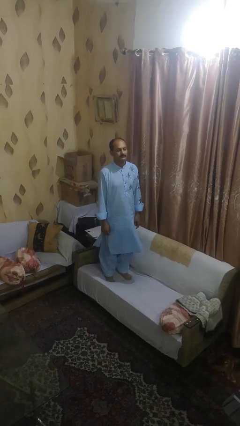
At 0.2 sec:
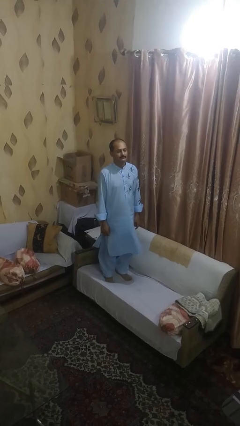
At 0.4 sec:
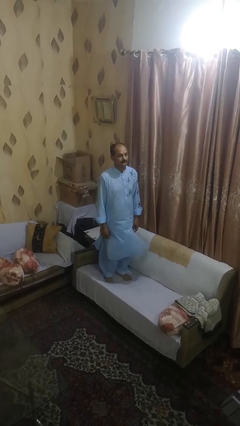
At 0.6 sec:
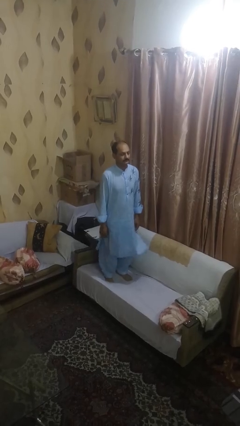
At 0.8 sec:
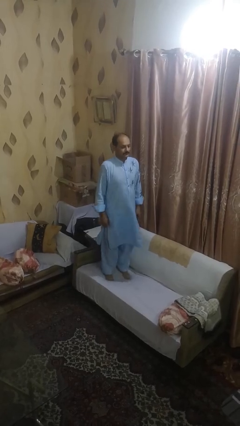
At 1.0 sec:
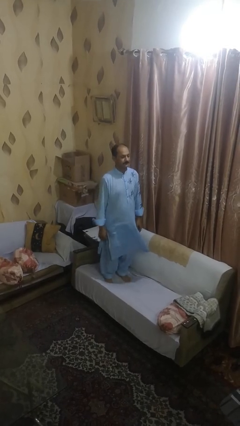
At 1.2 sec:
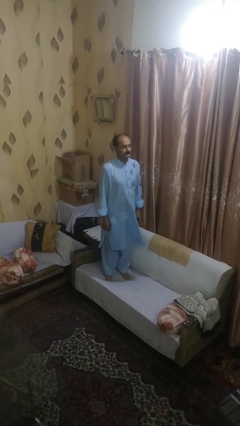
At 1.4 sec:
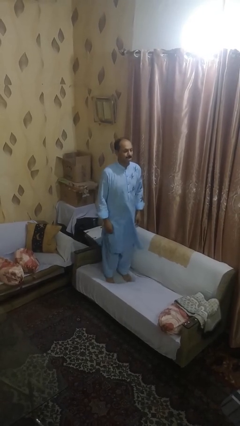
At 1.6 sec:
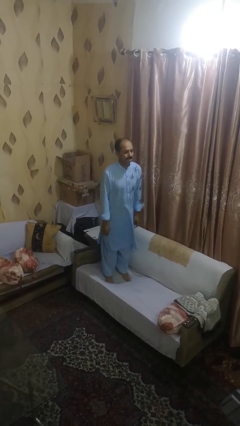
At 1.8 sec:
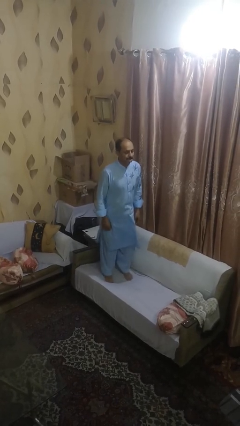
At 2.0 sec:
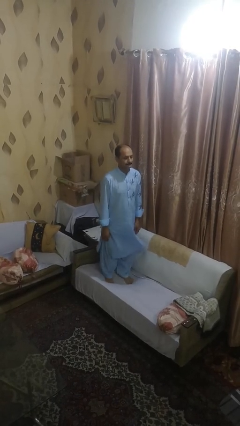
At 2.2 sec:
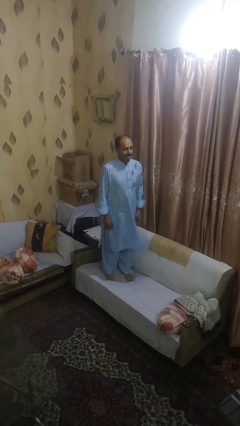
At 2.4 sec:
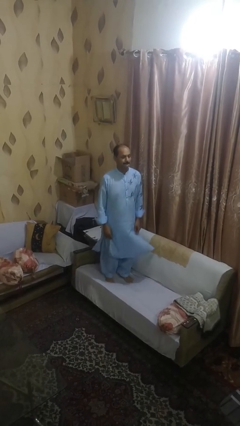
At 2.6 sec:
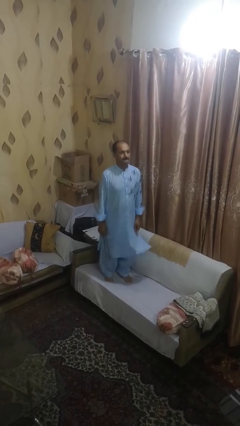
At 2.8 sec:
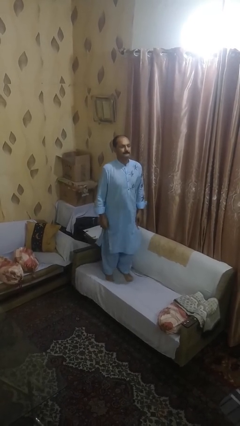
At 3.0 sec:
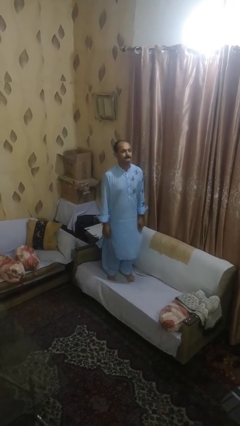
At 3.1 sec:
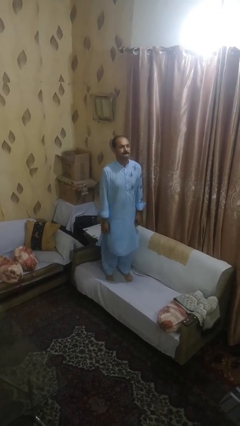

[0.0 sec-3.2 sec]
person jumps on couch

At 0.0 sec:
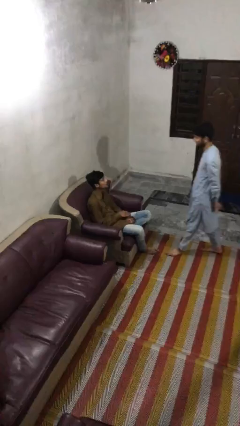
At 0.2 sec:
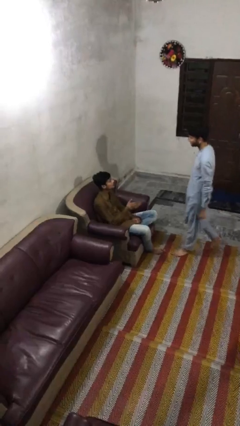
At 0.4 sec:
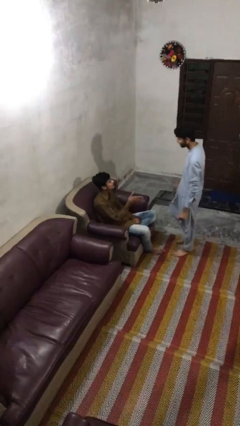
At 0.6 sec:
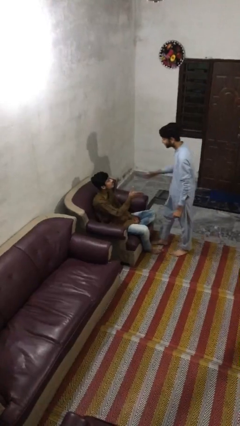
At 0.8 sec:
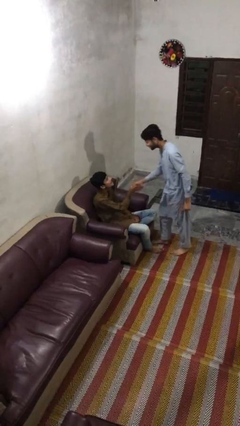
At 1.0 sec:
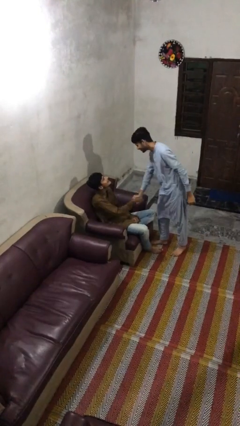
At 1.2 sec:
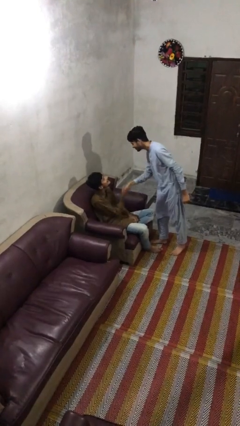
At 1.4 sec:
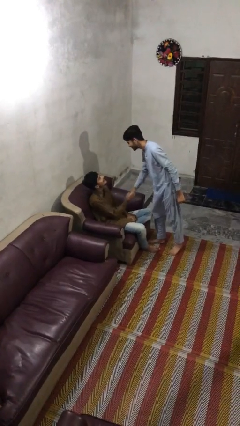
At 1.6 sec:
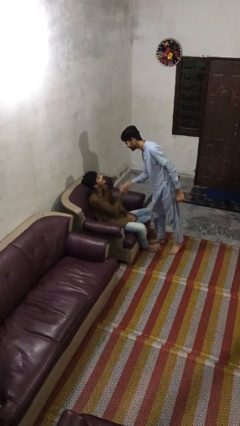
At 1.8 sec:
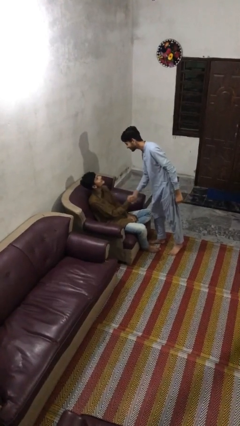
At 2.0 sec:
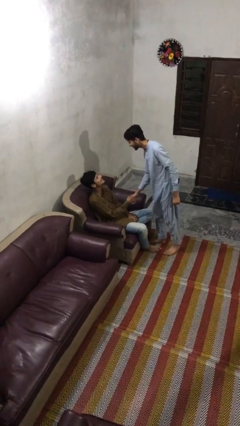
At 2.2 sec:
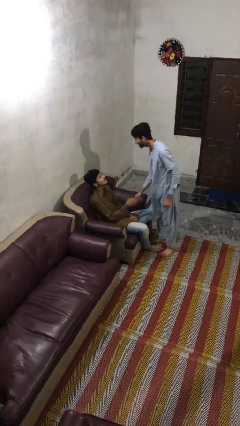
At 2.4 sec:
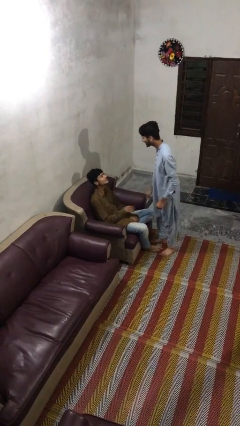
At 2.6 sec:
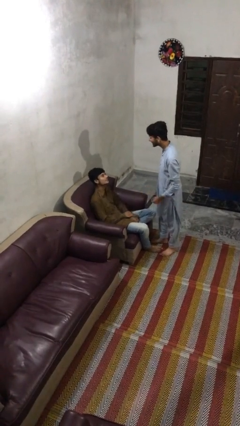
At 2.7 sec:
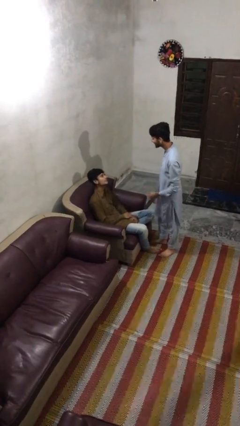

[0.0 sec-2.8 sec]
person shakes hand

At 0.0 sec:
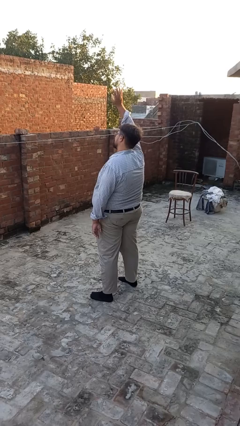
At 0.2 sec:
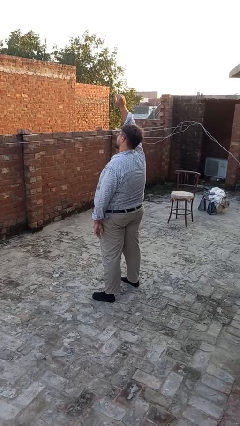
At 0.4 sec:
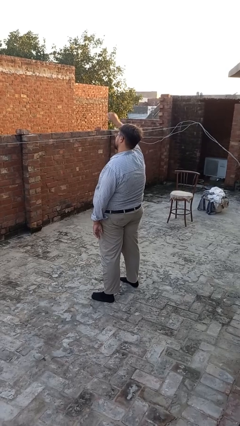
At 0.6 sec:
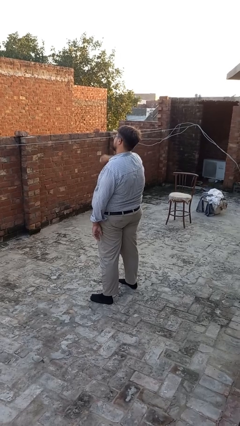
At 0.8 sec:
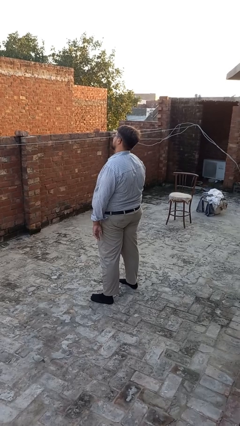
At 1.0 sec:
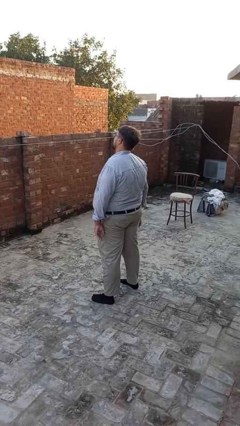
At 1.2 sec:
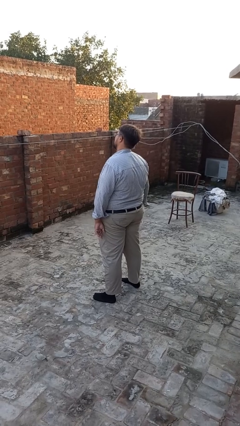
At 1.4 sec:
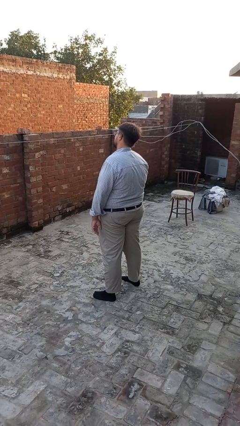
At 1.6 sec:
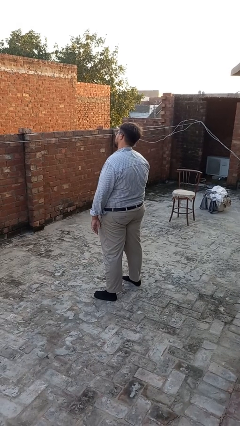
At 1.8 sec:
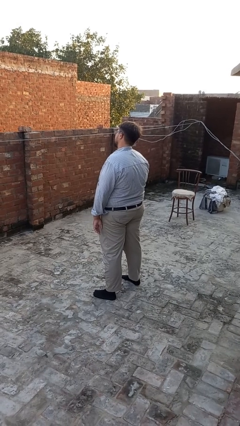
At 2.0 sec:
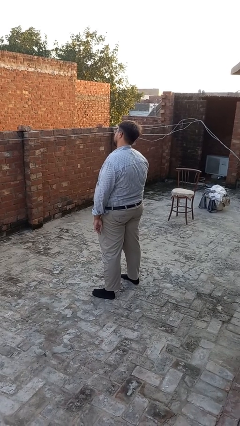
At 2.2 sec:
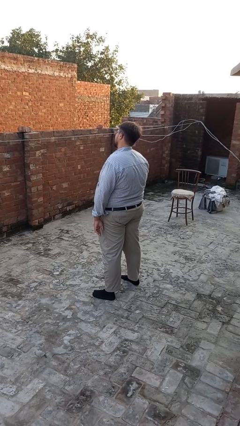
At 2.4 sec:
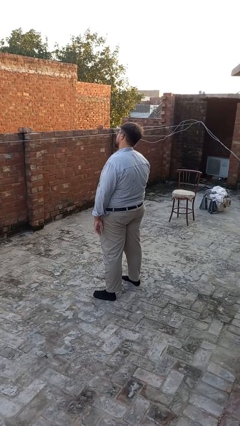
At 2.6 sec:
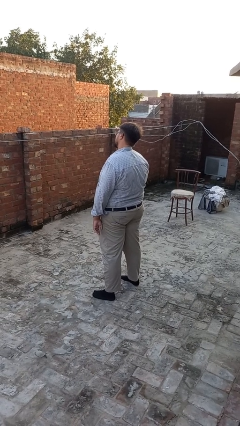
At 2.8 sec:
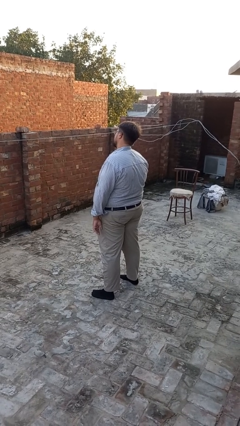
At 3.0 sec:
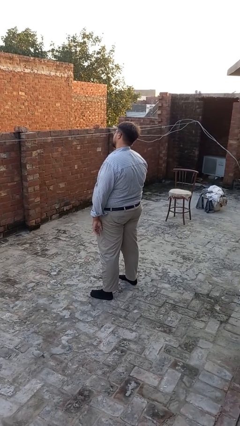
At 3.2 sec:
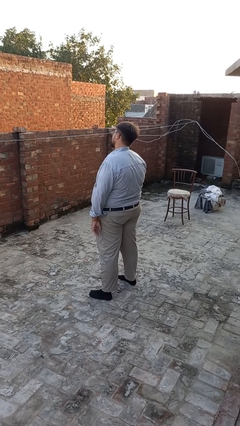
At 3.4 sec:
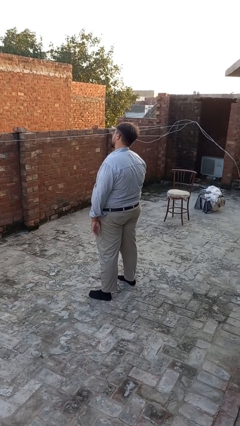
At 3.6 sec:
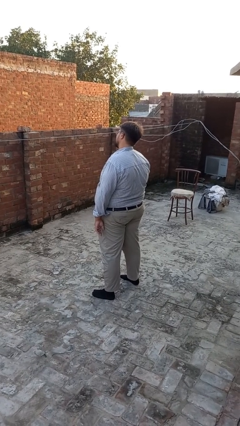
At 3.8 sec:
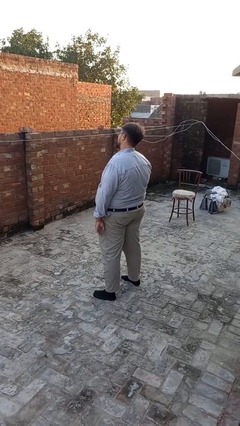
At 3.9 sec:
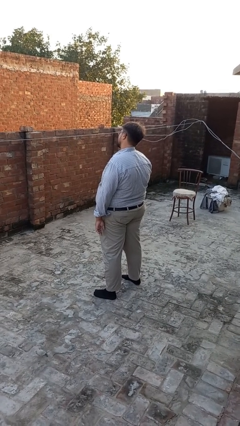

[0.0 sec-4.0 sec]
person gestures lower hand

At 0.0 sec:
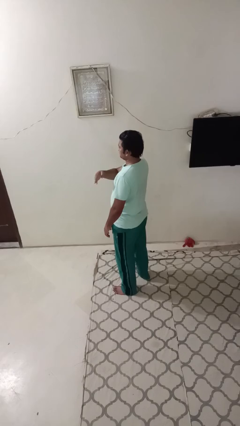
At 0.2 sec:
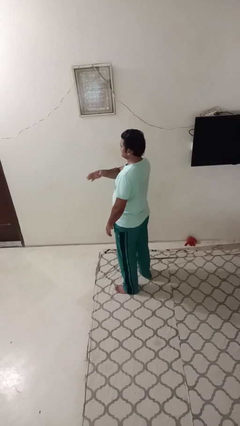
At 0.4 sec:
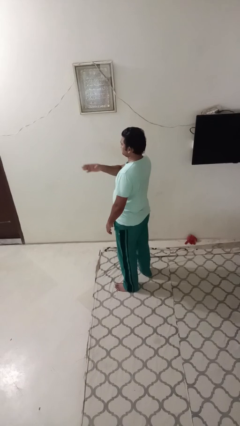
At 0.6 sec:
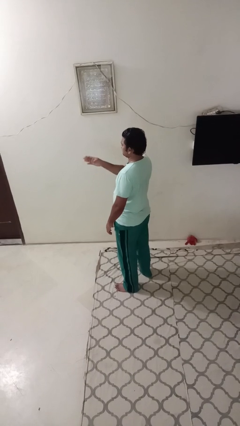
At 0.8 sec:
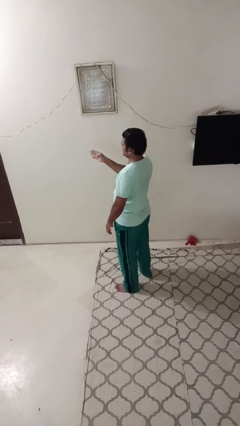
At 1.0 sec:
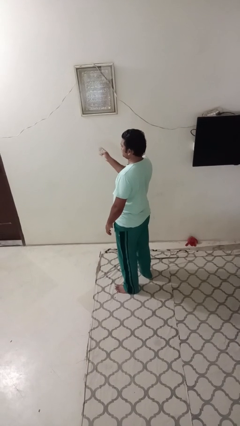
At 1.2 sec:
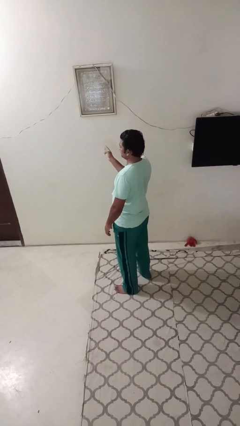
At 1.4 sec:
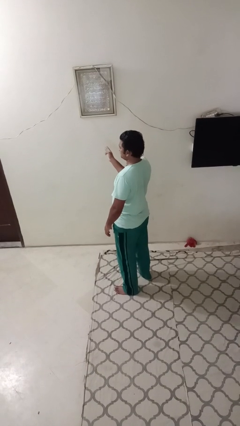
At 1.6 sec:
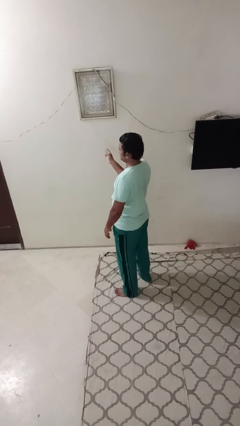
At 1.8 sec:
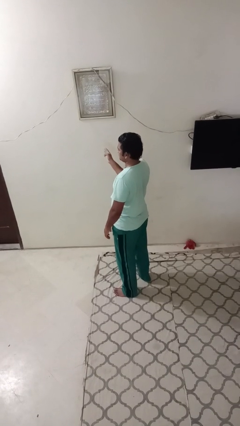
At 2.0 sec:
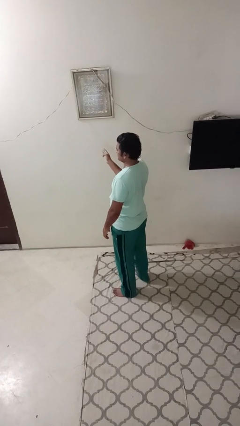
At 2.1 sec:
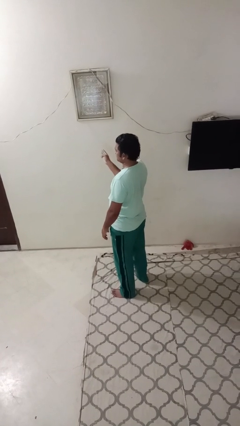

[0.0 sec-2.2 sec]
person gestures swipe right

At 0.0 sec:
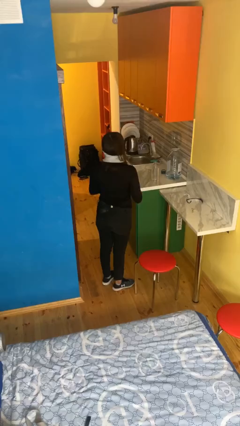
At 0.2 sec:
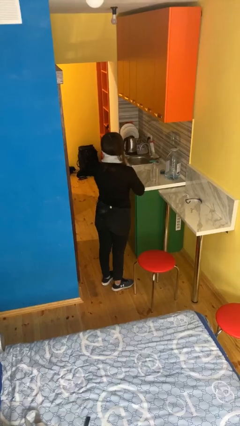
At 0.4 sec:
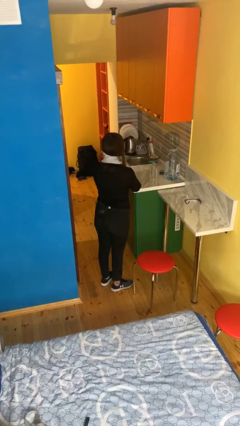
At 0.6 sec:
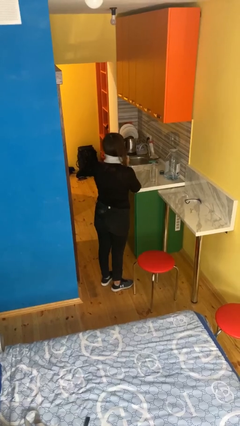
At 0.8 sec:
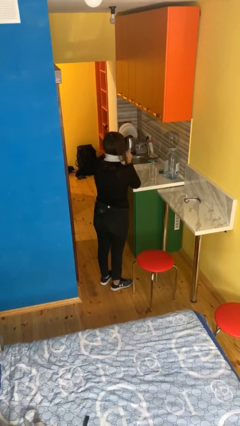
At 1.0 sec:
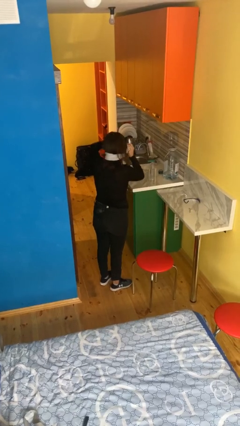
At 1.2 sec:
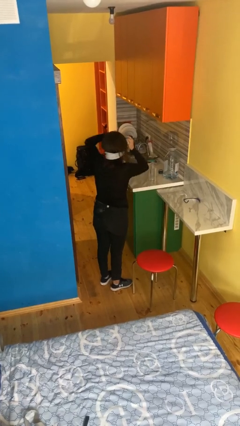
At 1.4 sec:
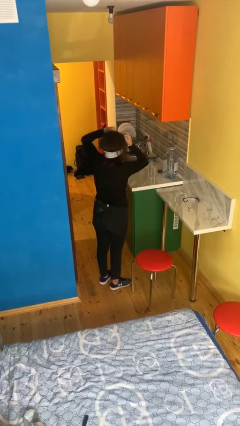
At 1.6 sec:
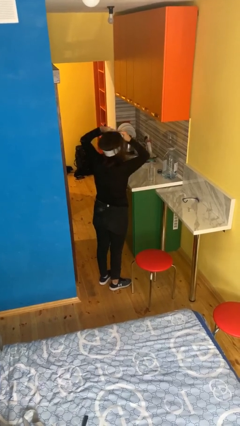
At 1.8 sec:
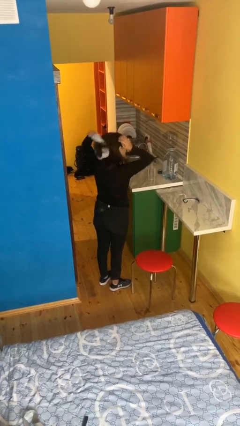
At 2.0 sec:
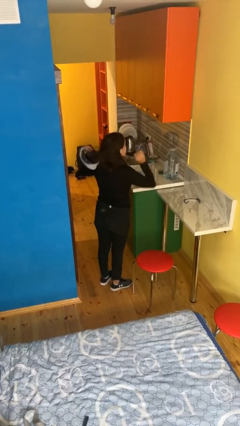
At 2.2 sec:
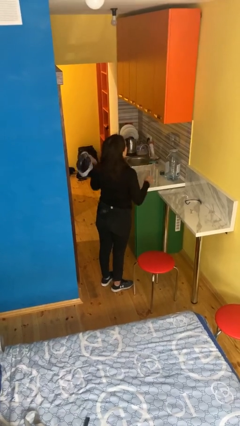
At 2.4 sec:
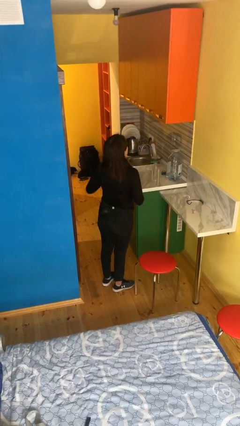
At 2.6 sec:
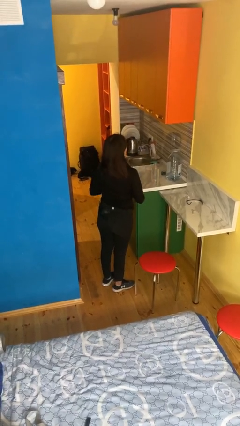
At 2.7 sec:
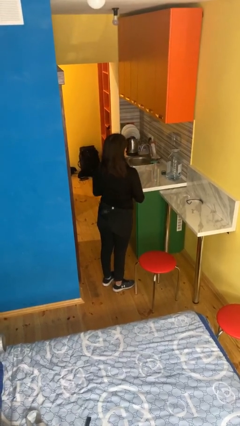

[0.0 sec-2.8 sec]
person takes off scarf

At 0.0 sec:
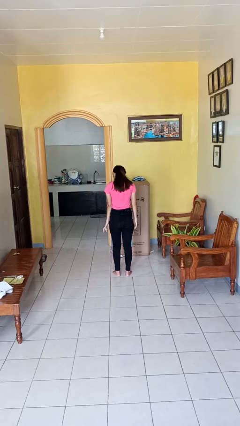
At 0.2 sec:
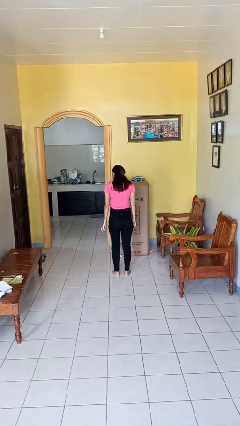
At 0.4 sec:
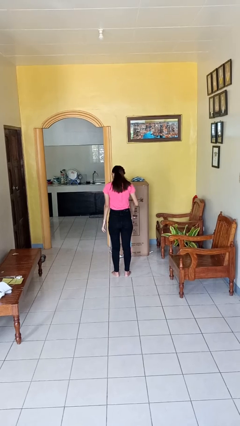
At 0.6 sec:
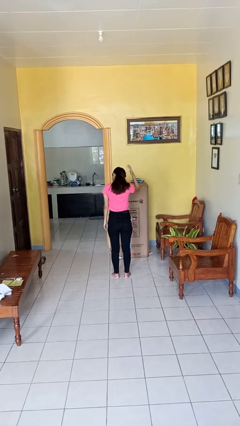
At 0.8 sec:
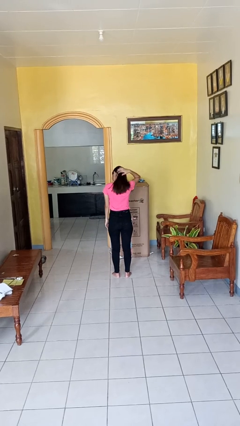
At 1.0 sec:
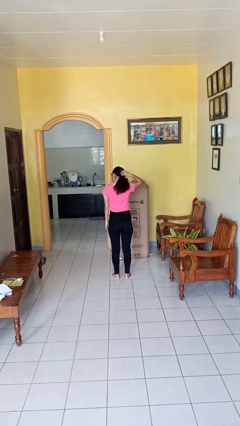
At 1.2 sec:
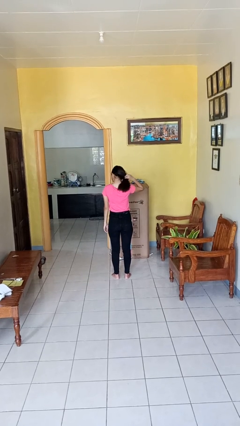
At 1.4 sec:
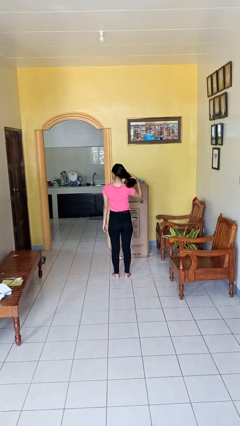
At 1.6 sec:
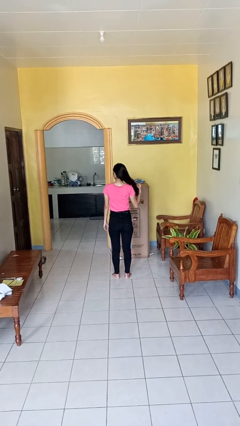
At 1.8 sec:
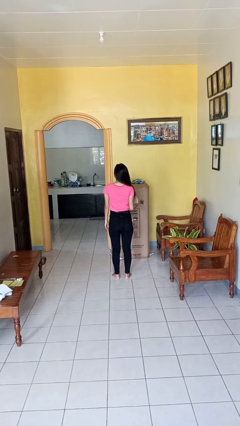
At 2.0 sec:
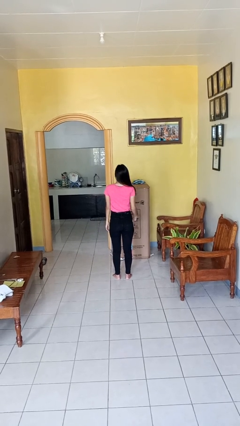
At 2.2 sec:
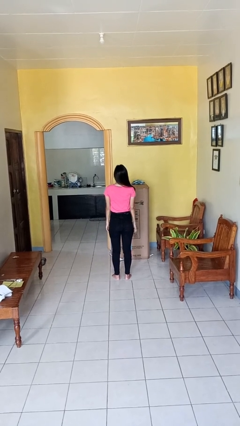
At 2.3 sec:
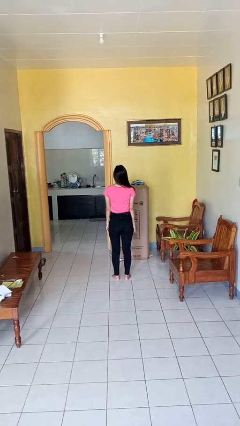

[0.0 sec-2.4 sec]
person takes off hairtie
